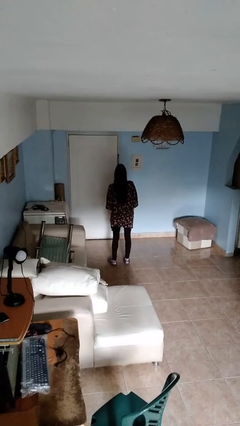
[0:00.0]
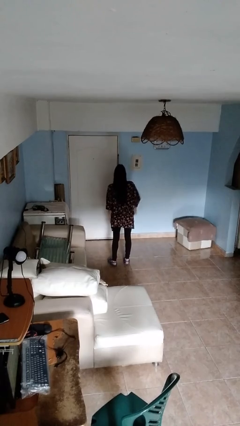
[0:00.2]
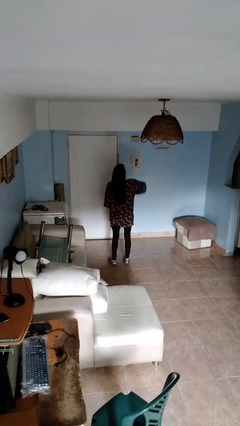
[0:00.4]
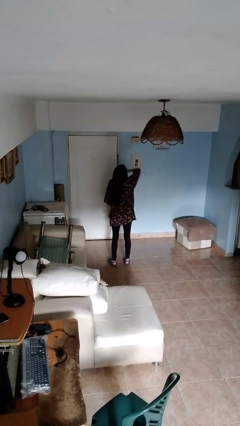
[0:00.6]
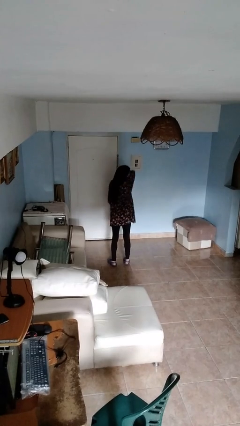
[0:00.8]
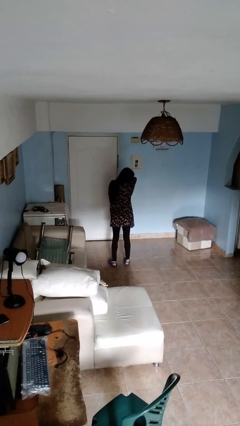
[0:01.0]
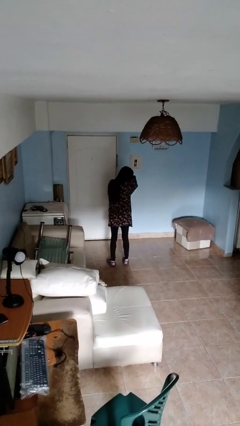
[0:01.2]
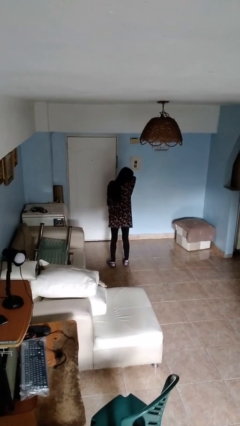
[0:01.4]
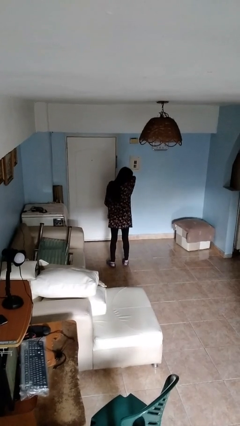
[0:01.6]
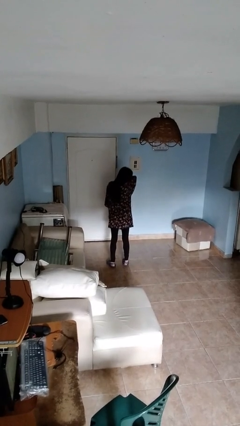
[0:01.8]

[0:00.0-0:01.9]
person sneezes into arm

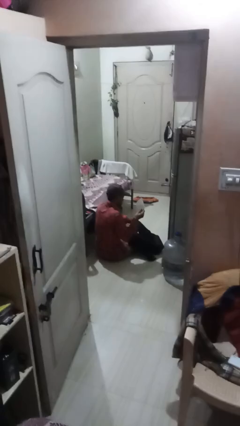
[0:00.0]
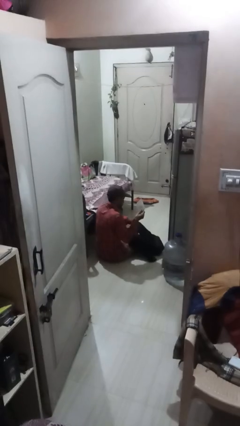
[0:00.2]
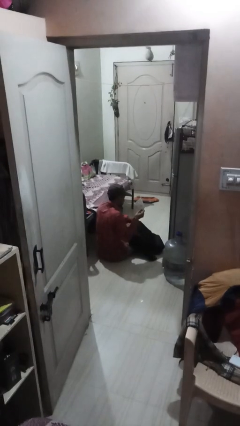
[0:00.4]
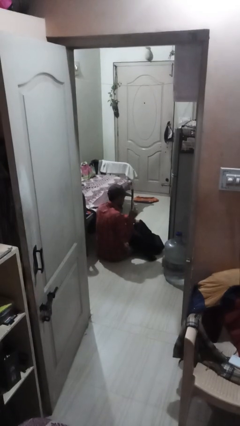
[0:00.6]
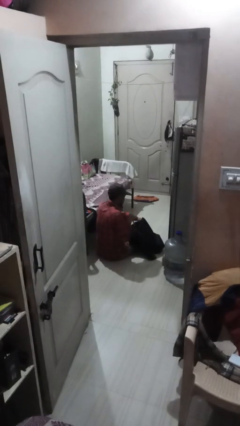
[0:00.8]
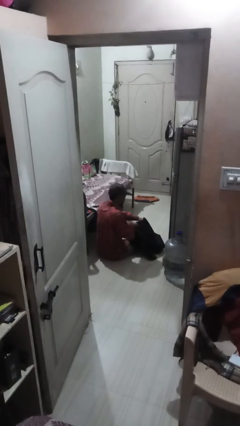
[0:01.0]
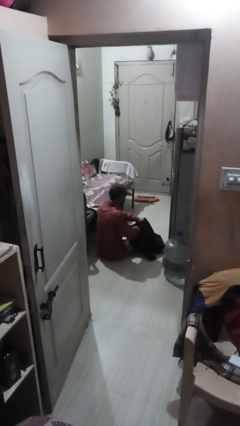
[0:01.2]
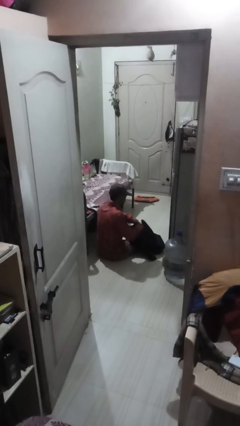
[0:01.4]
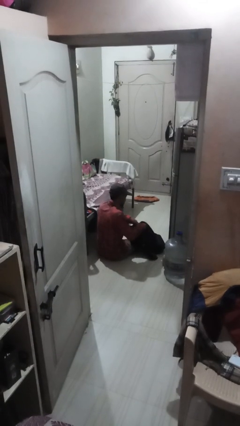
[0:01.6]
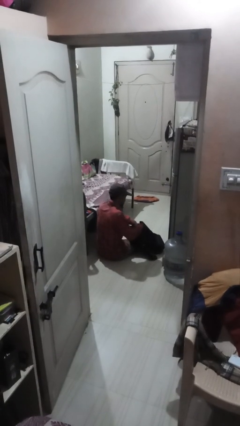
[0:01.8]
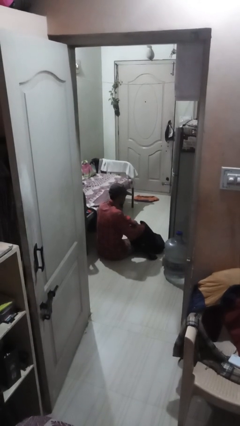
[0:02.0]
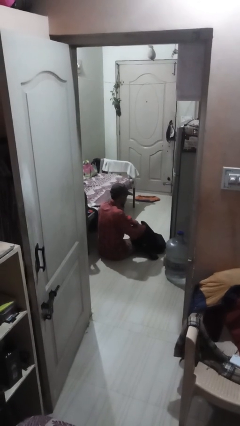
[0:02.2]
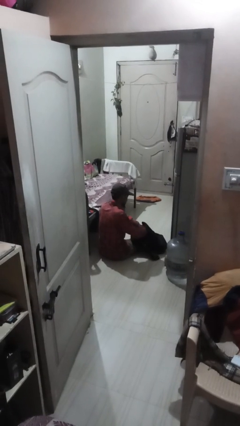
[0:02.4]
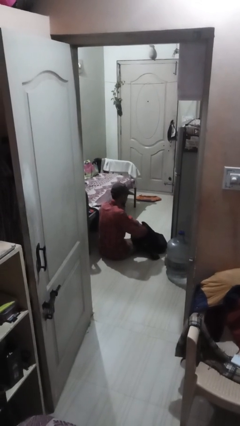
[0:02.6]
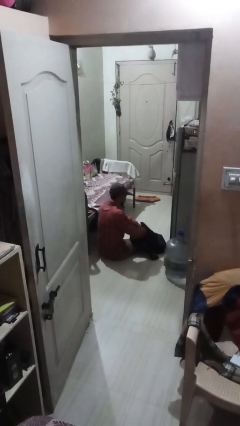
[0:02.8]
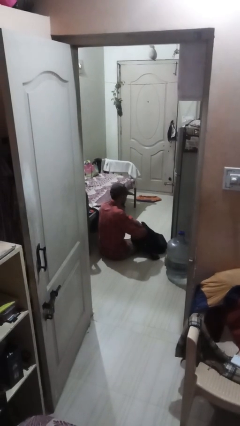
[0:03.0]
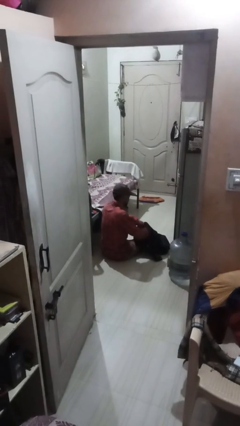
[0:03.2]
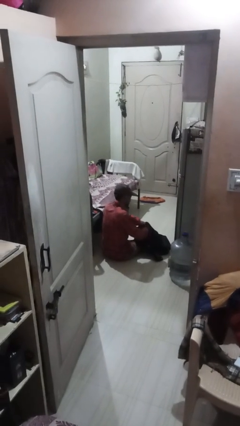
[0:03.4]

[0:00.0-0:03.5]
person puts object into backpack

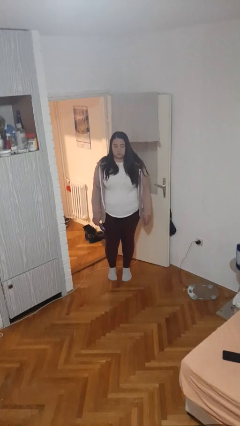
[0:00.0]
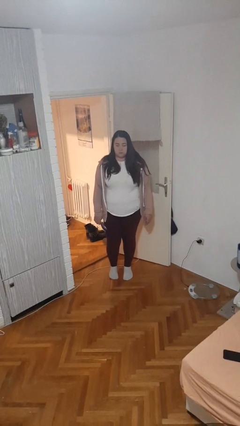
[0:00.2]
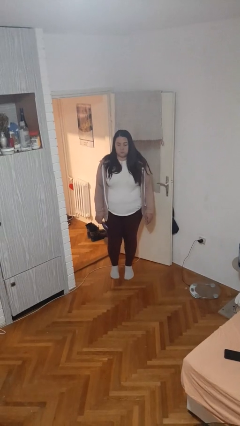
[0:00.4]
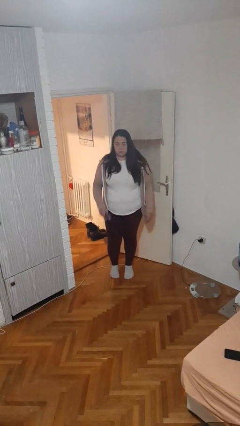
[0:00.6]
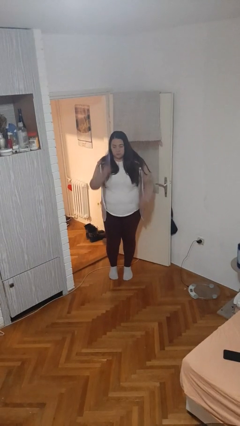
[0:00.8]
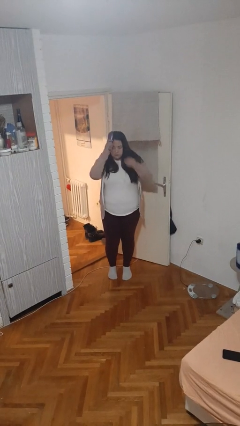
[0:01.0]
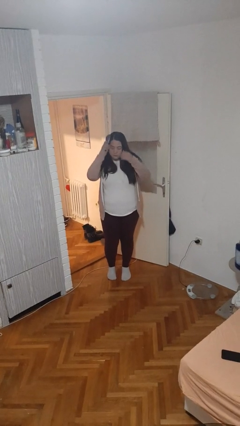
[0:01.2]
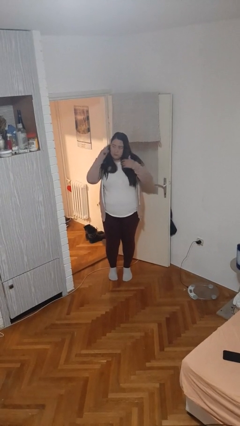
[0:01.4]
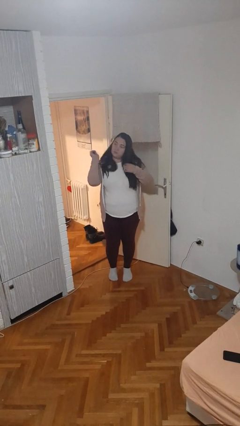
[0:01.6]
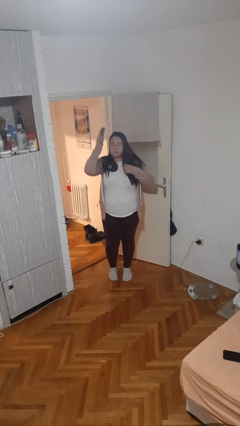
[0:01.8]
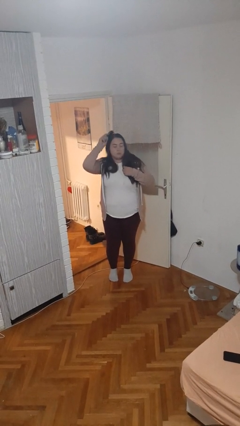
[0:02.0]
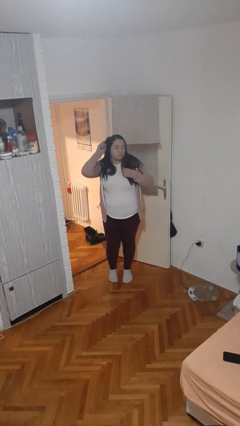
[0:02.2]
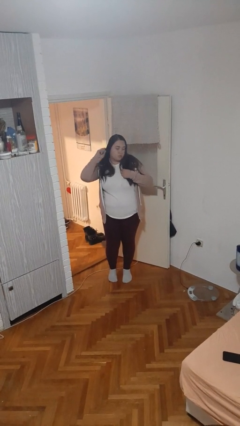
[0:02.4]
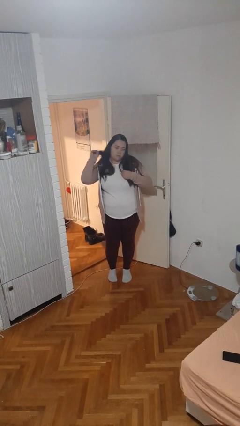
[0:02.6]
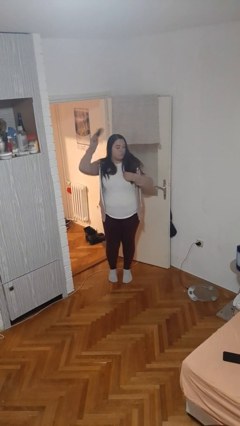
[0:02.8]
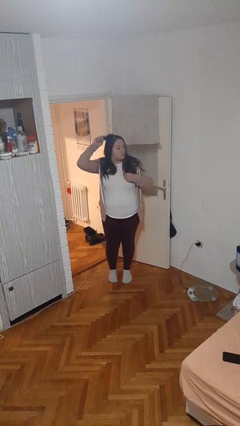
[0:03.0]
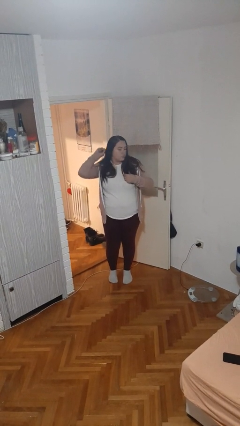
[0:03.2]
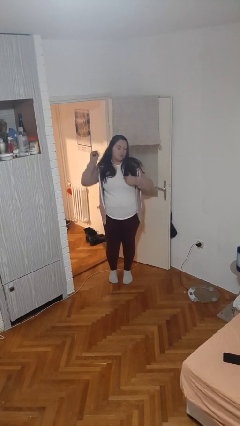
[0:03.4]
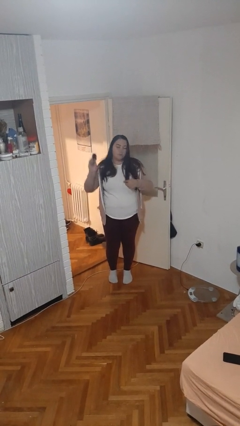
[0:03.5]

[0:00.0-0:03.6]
person brushes hair

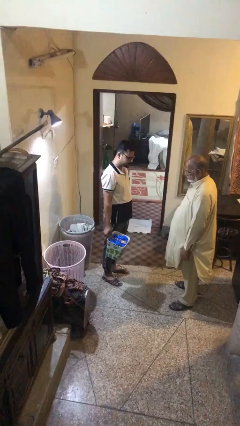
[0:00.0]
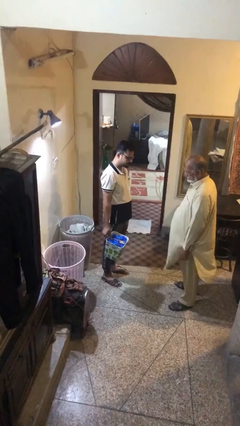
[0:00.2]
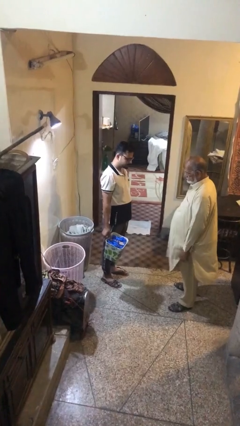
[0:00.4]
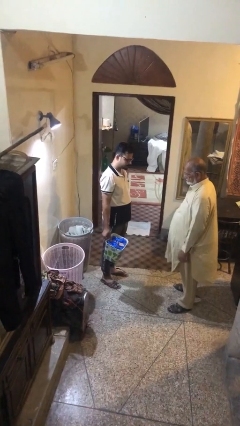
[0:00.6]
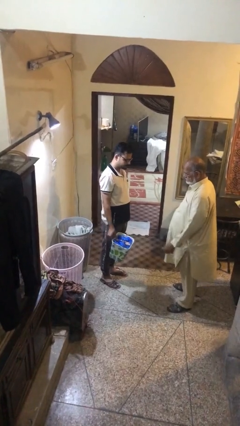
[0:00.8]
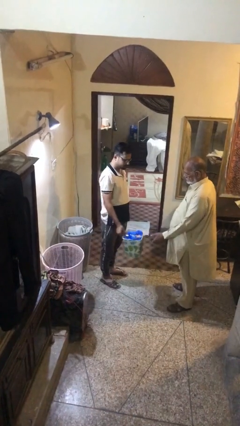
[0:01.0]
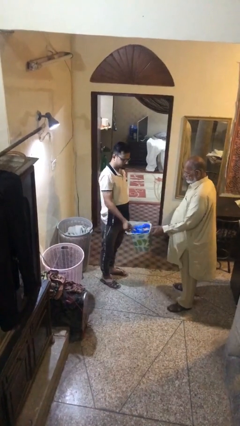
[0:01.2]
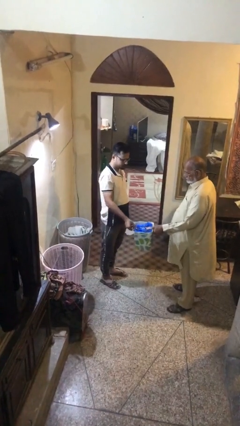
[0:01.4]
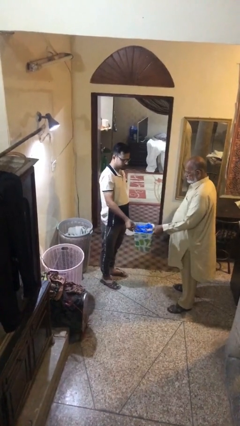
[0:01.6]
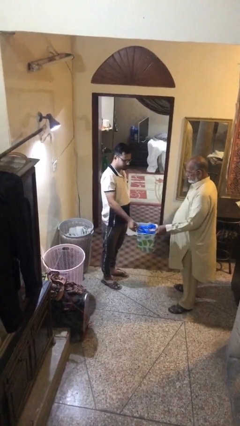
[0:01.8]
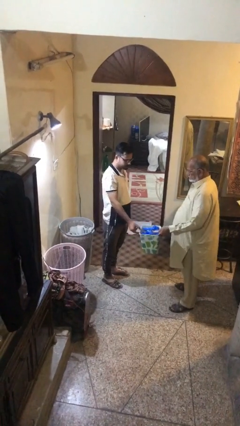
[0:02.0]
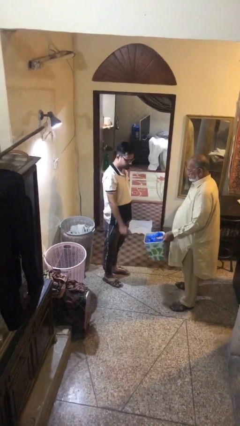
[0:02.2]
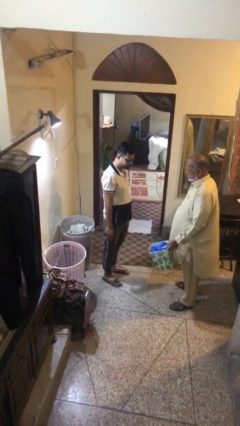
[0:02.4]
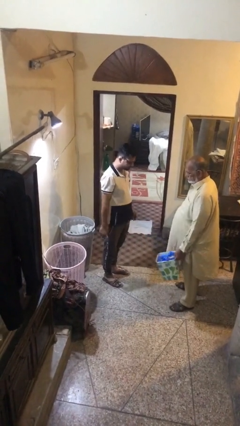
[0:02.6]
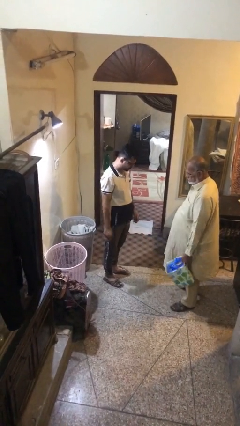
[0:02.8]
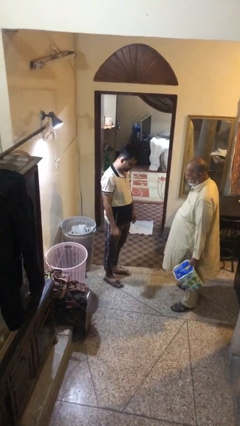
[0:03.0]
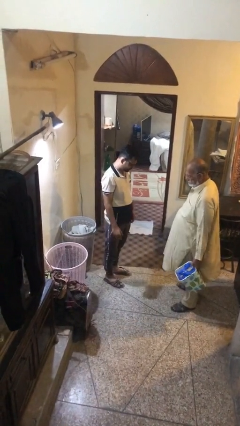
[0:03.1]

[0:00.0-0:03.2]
person transfers object to person

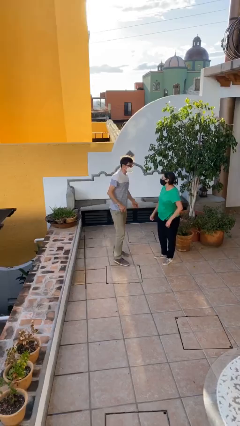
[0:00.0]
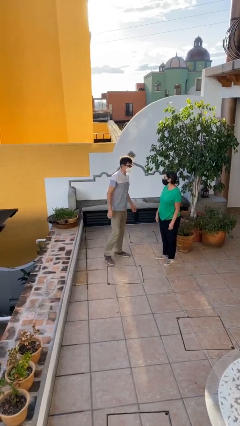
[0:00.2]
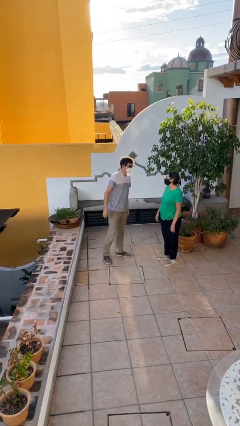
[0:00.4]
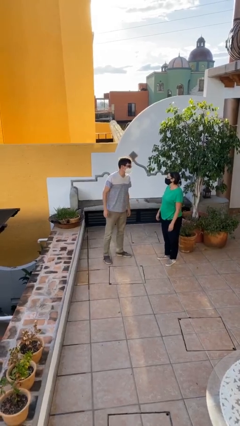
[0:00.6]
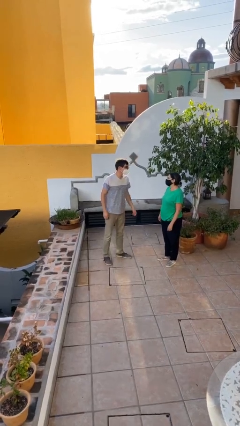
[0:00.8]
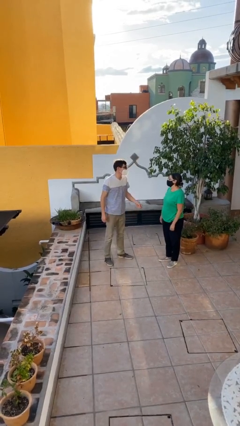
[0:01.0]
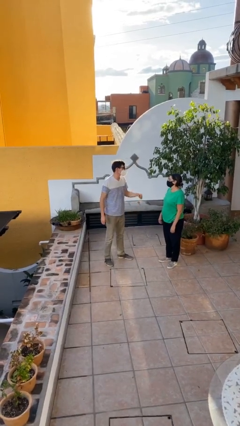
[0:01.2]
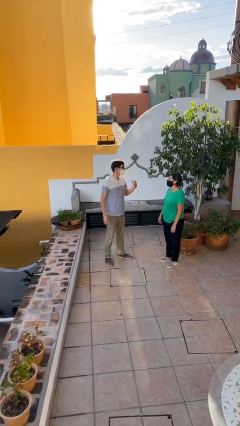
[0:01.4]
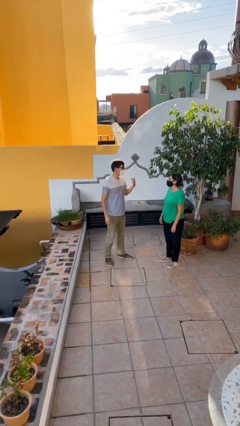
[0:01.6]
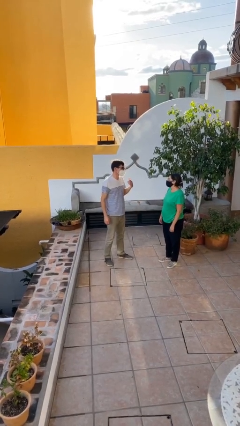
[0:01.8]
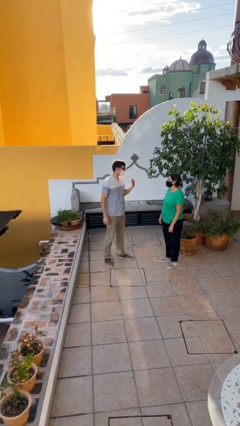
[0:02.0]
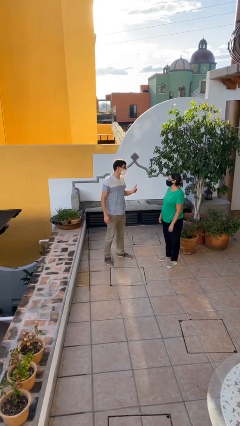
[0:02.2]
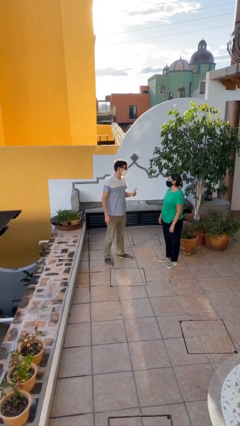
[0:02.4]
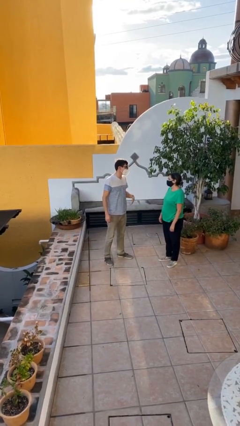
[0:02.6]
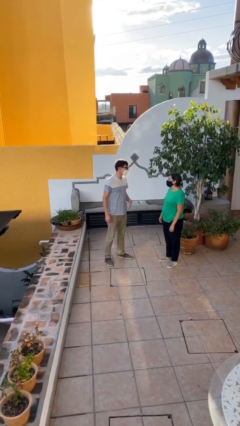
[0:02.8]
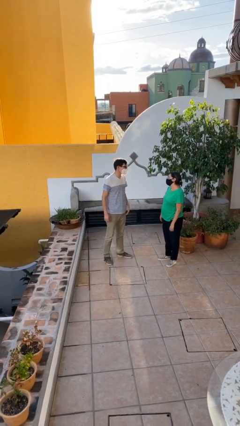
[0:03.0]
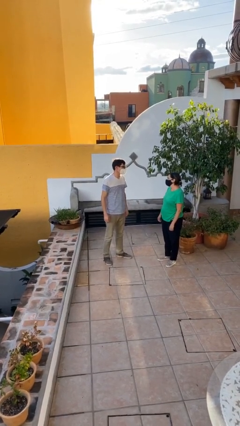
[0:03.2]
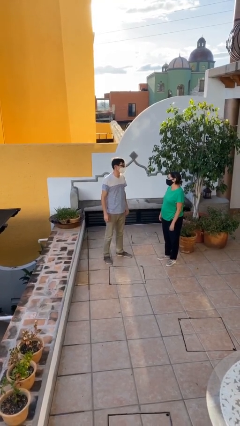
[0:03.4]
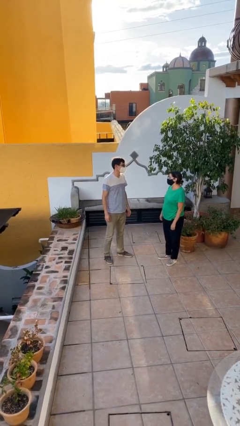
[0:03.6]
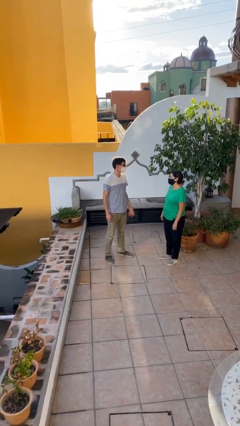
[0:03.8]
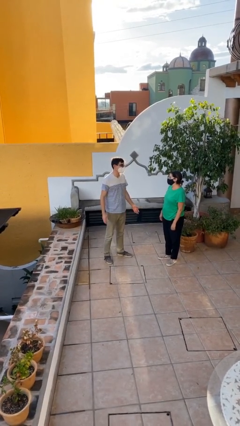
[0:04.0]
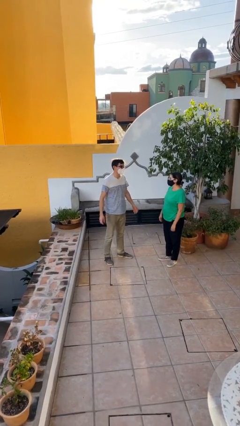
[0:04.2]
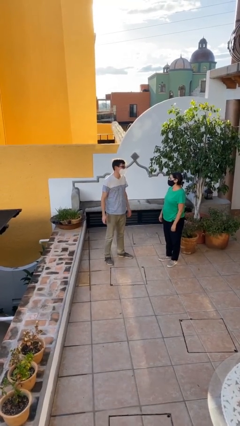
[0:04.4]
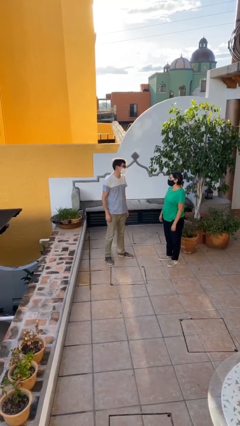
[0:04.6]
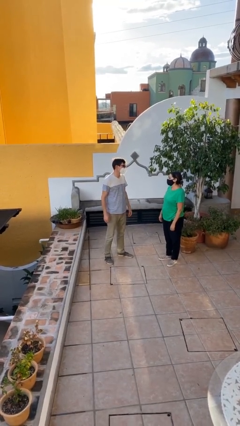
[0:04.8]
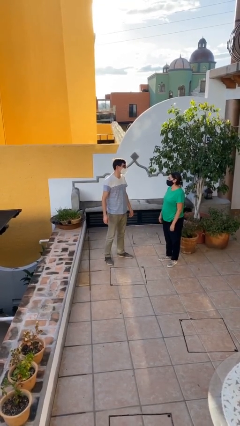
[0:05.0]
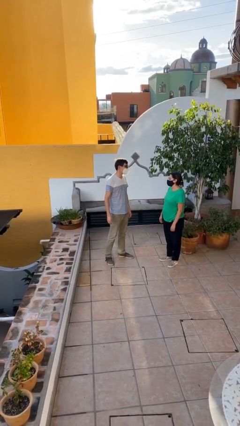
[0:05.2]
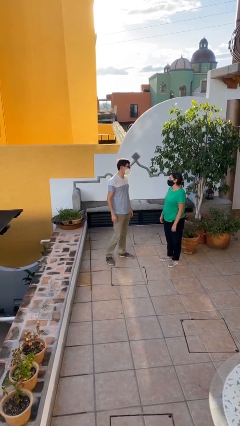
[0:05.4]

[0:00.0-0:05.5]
person talks to person
